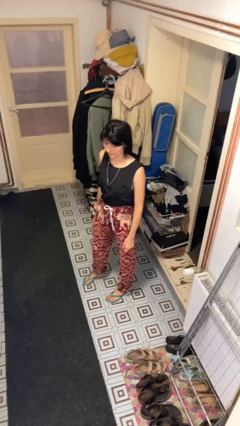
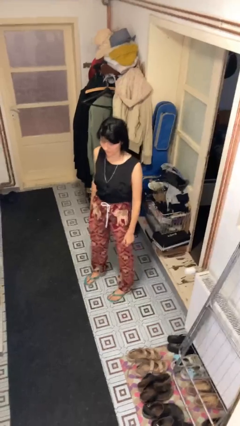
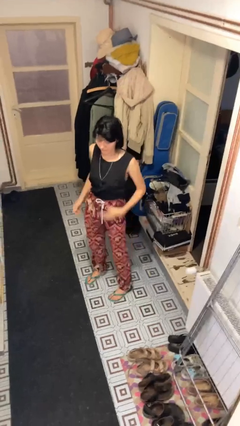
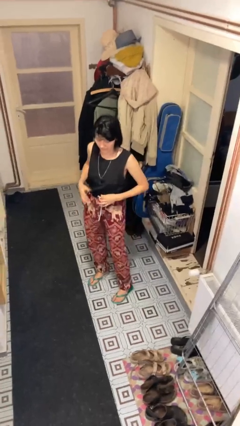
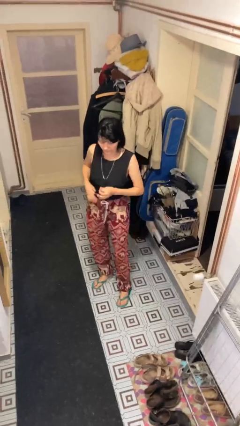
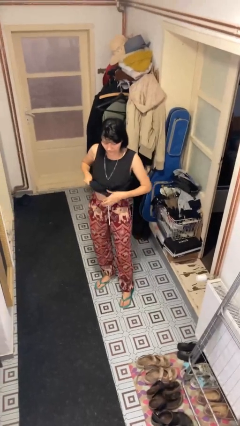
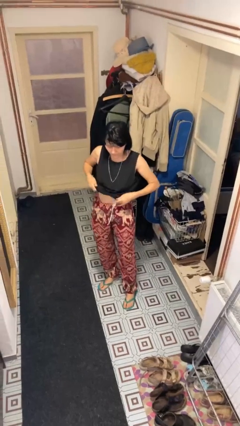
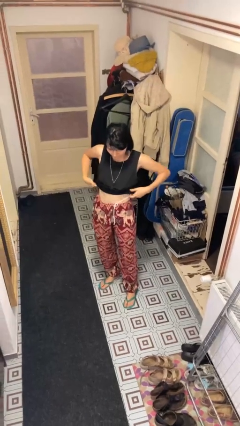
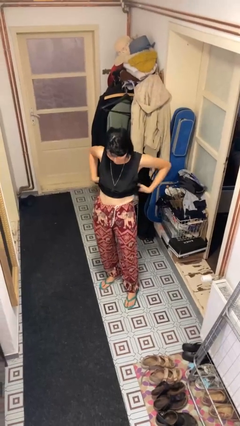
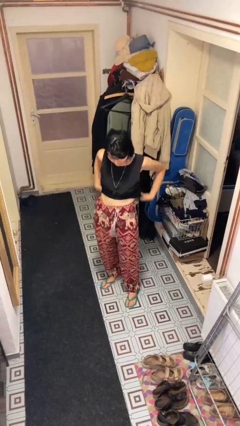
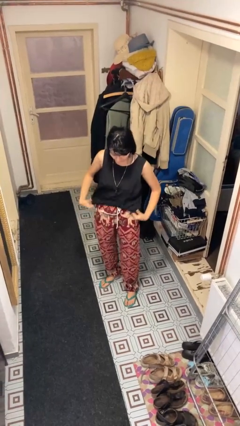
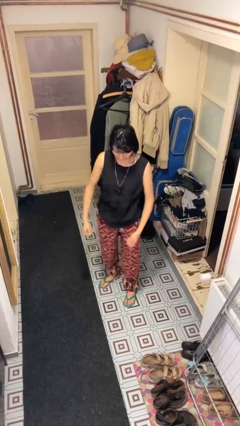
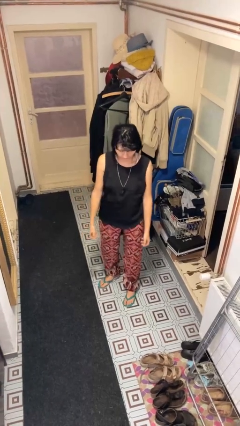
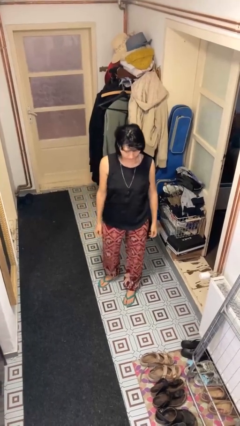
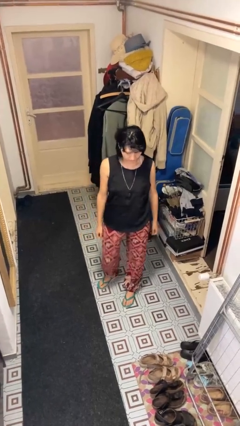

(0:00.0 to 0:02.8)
person untucks shirt

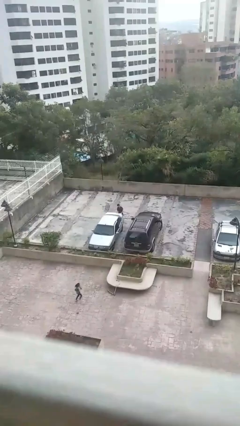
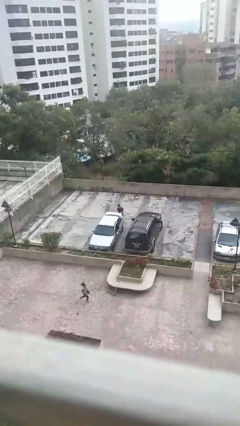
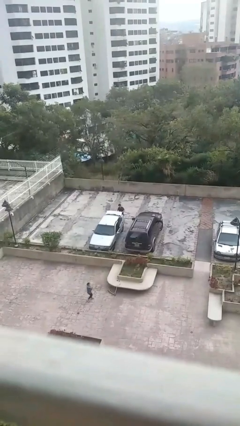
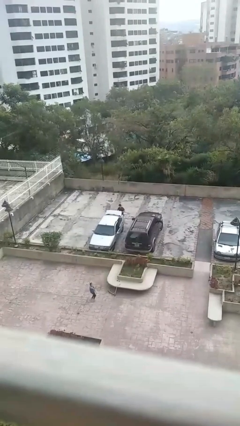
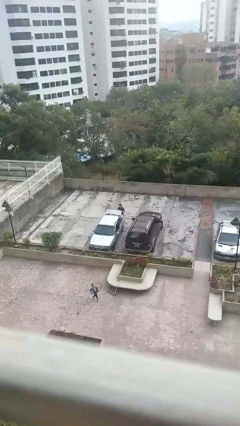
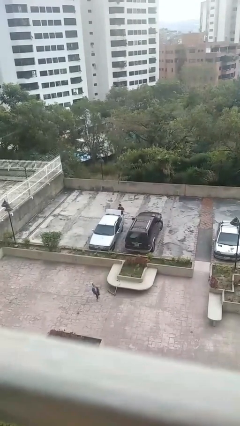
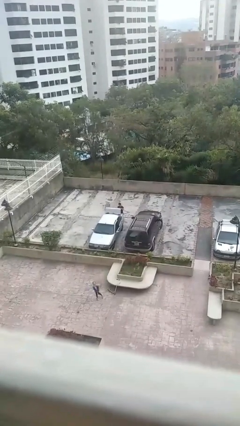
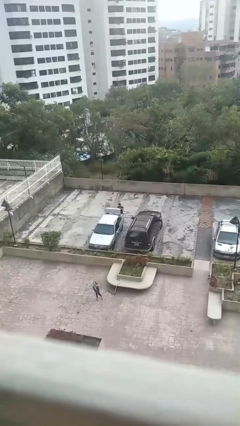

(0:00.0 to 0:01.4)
person opens car trunk

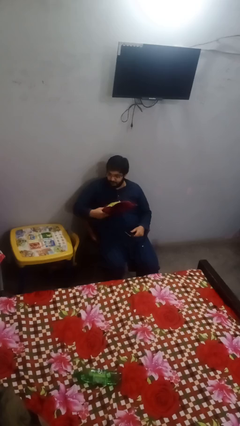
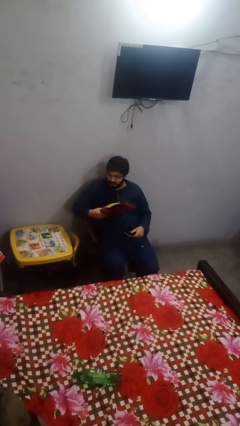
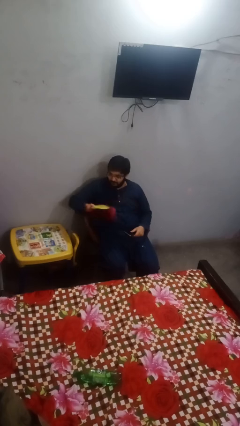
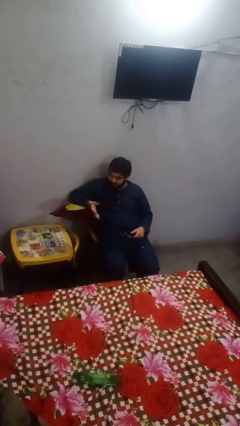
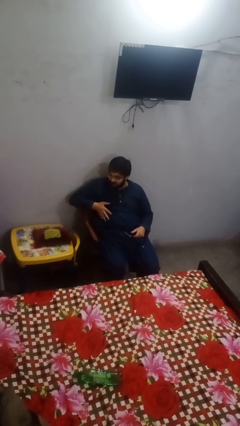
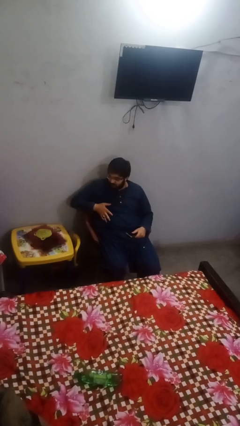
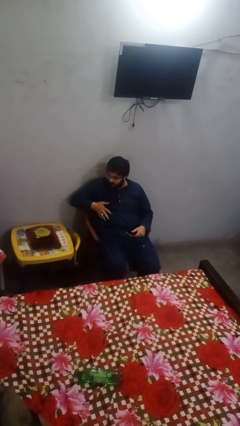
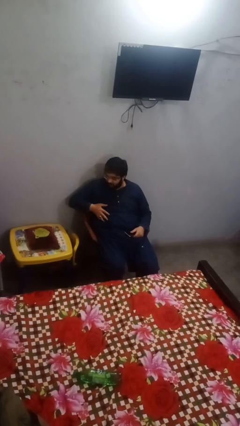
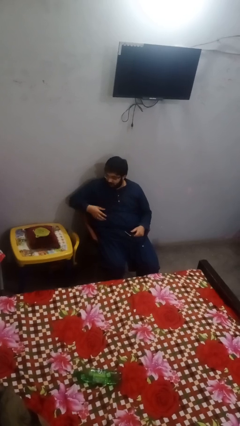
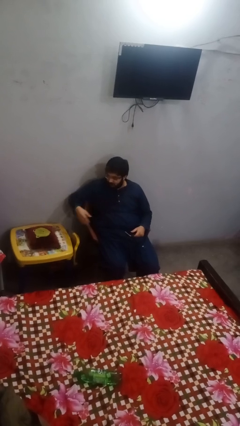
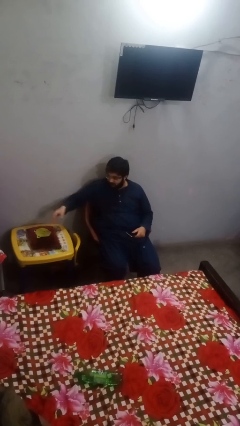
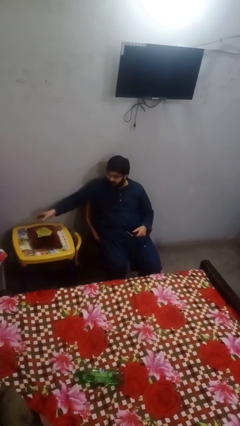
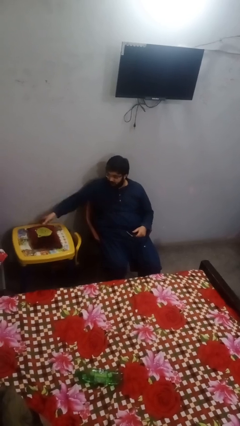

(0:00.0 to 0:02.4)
person throws object on table

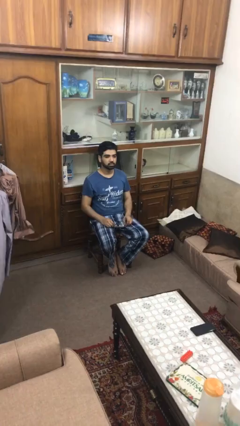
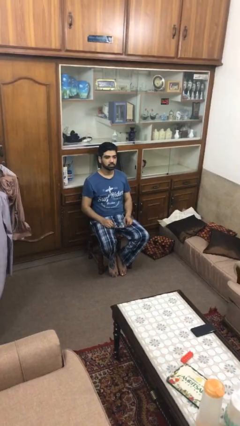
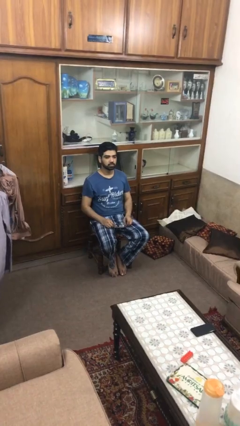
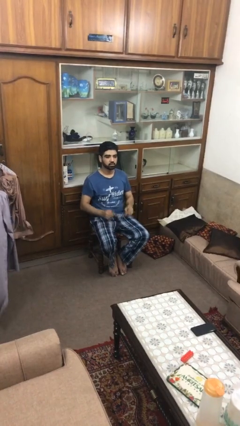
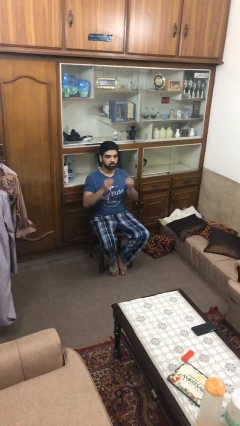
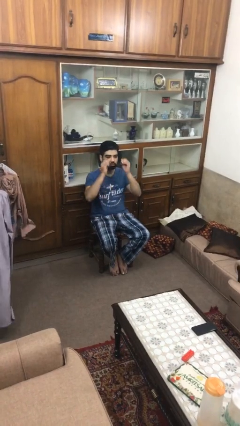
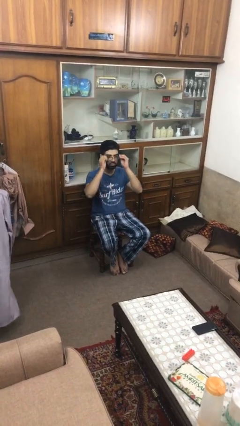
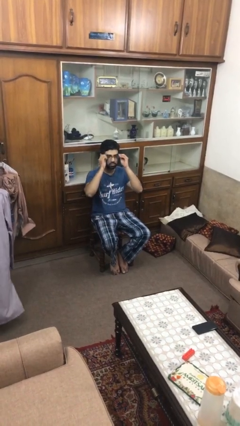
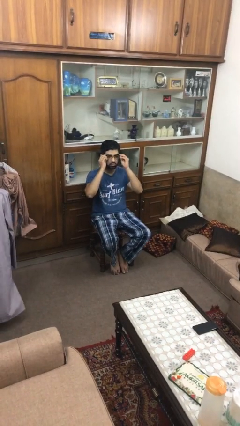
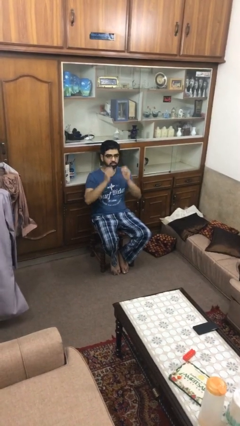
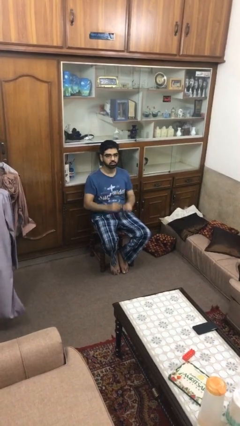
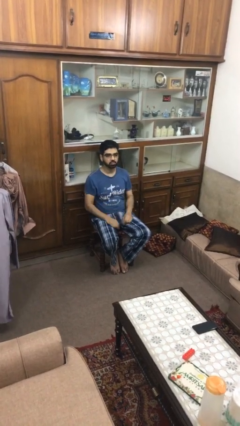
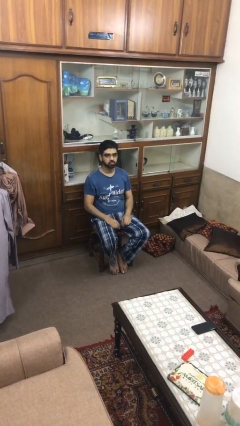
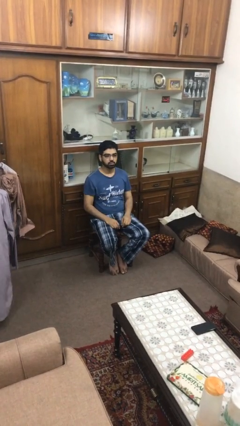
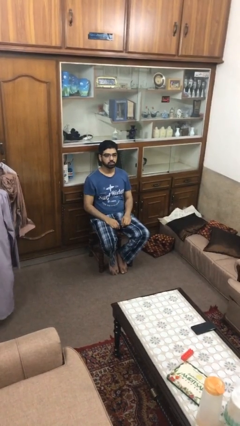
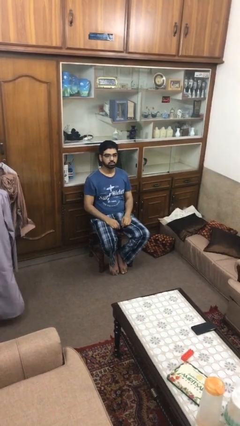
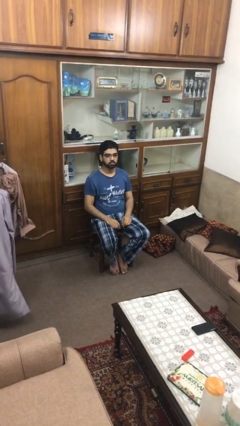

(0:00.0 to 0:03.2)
person puts on glasses

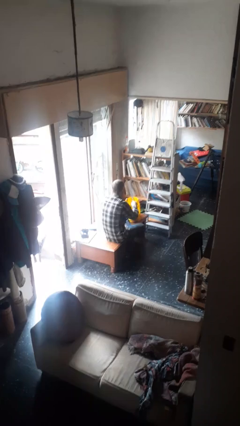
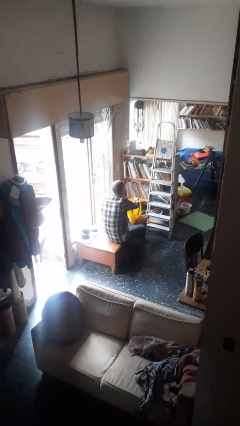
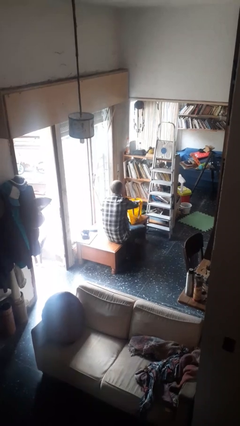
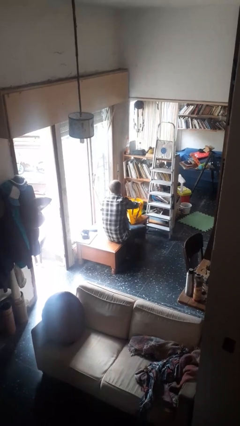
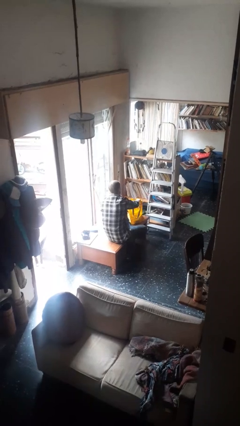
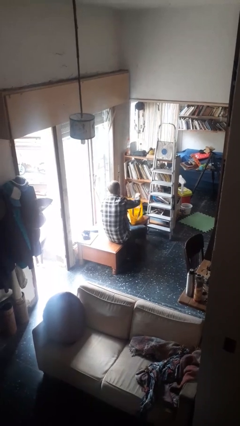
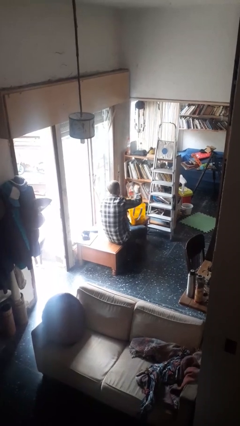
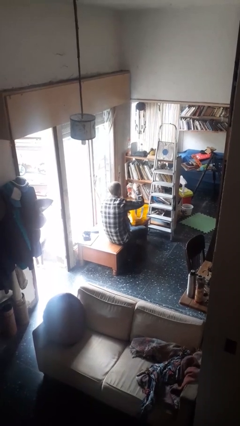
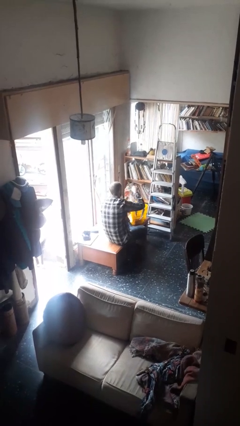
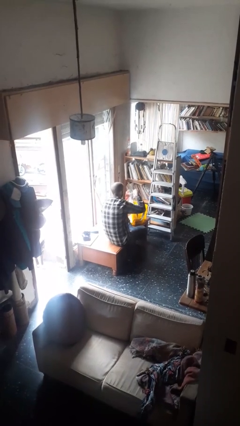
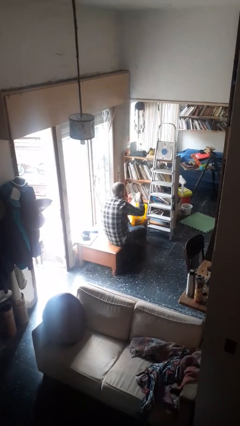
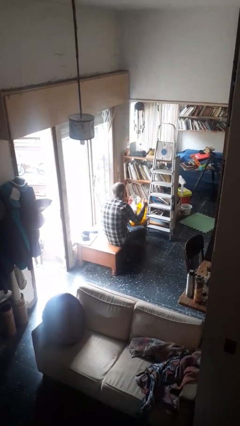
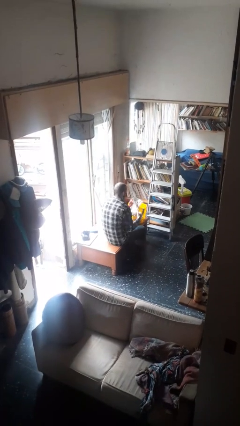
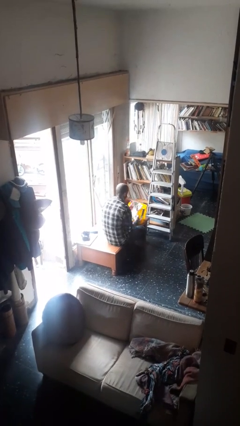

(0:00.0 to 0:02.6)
person takes object from bag

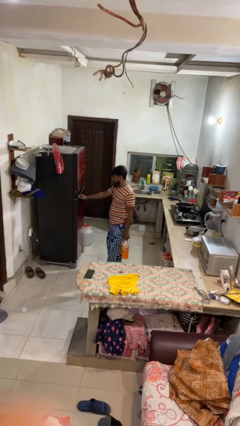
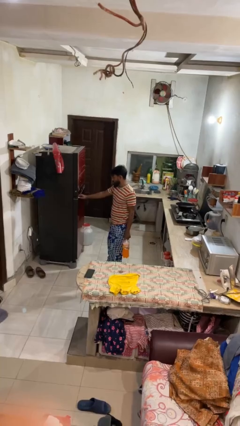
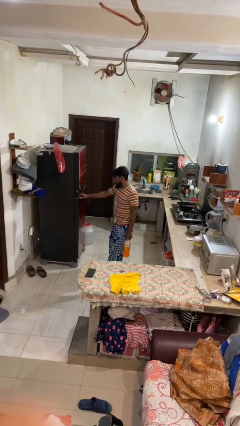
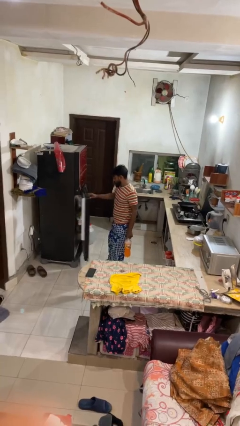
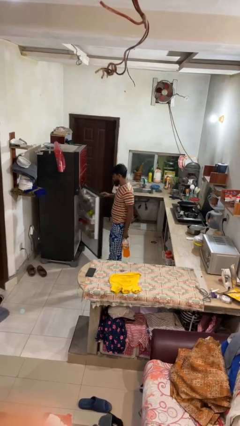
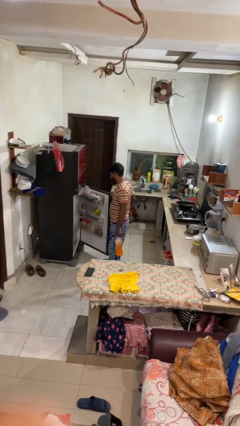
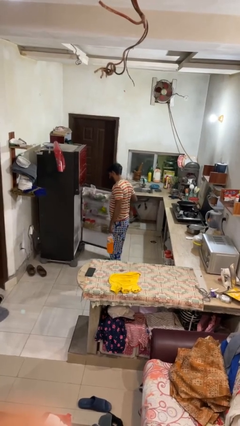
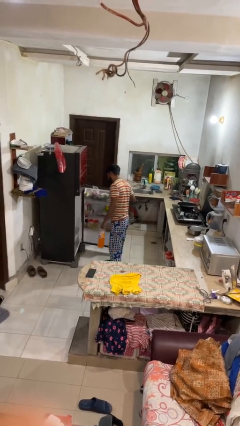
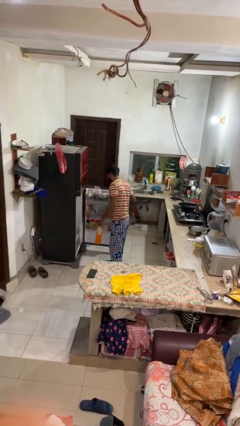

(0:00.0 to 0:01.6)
person opens refrigerator

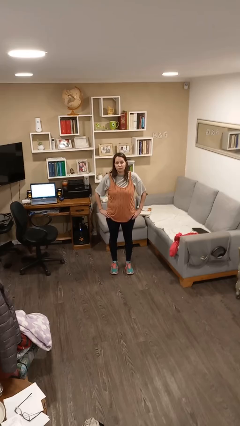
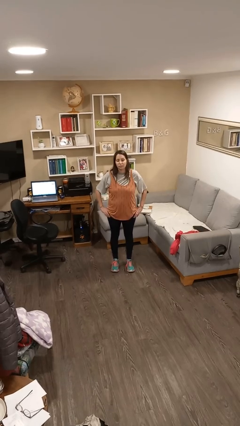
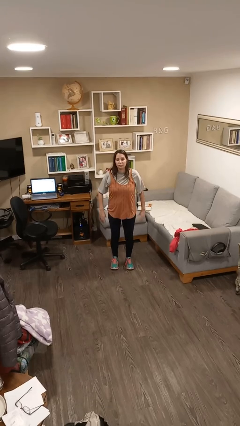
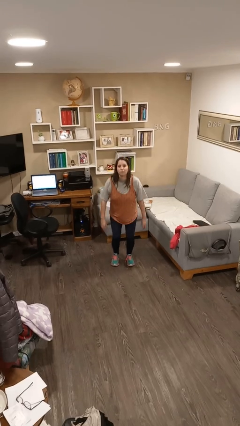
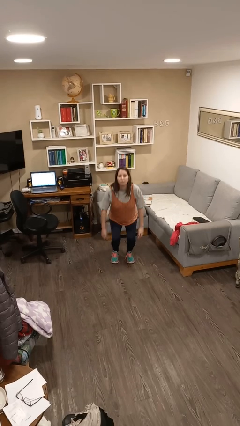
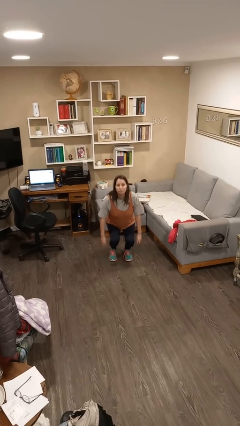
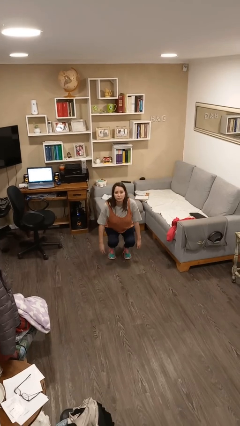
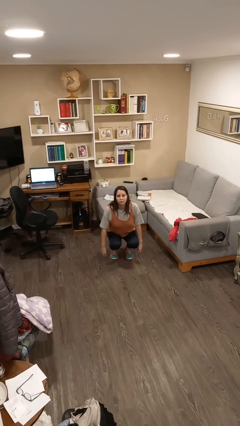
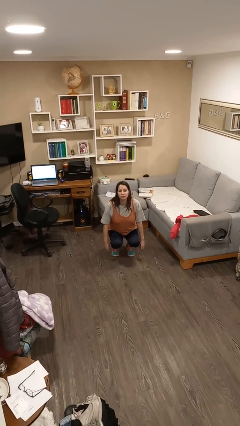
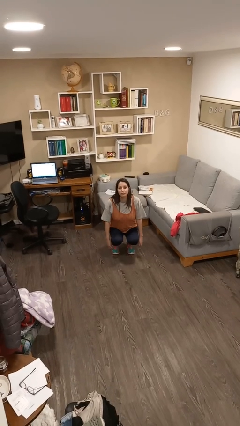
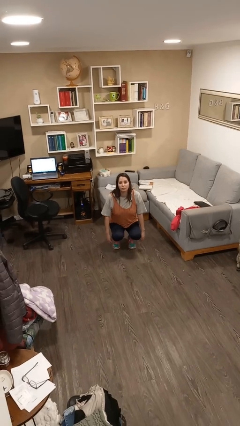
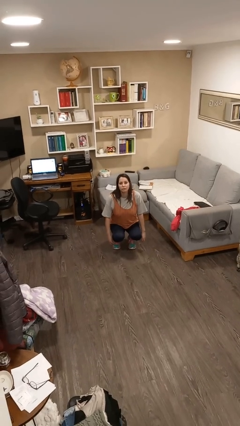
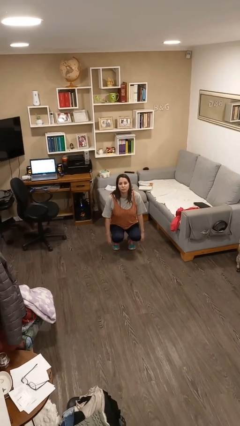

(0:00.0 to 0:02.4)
person squats

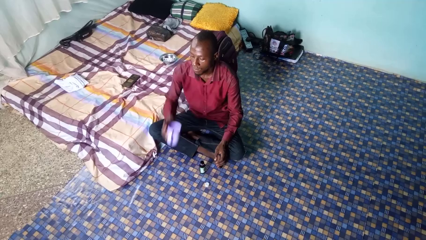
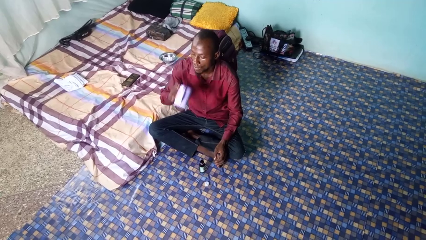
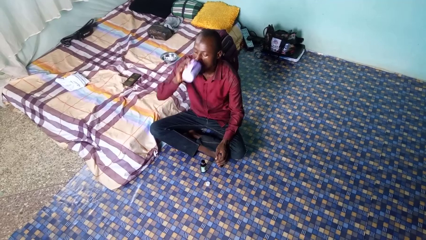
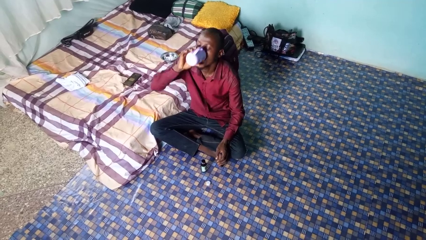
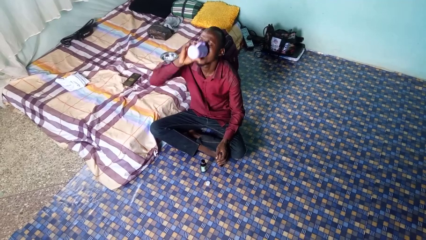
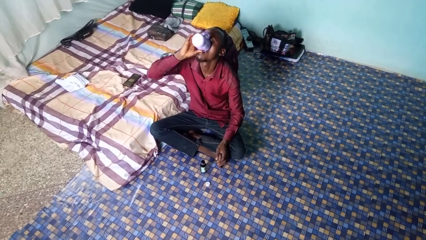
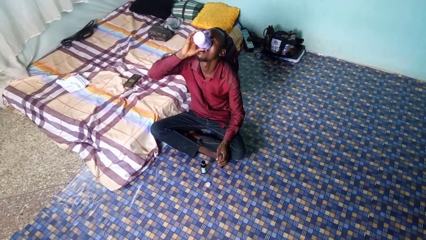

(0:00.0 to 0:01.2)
person drinks from cup
